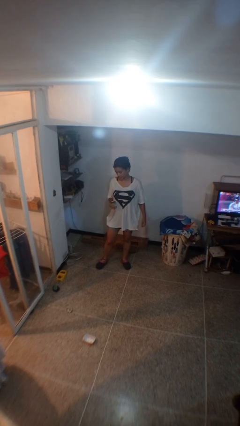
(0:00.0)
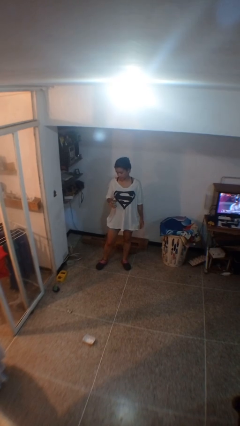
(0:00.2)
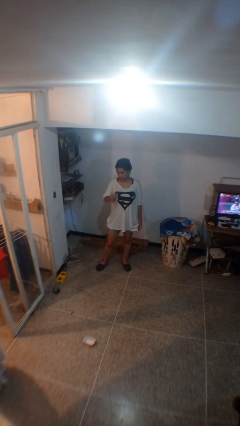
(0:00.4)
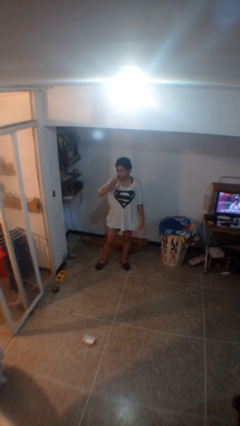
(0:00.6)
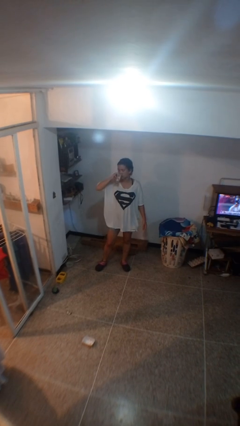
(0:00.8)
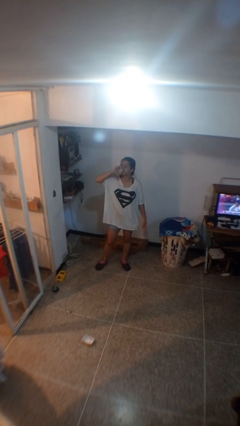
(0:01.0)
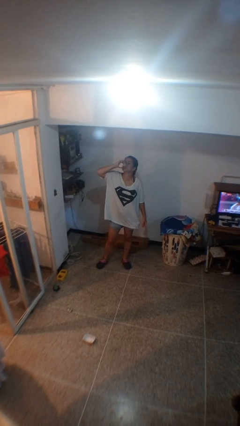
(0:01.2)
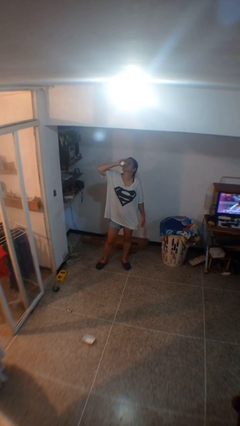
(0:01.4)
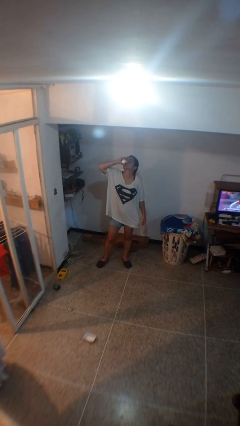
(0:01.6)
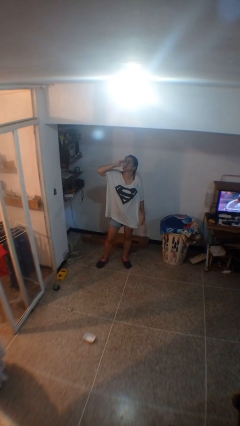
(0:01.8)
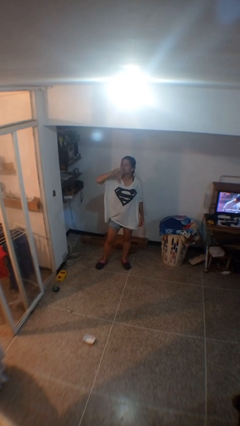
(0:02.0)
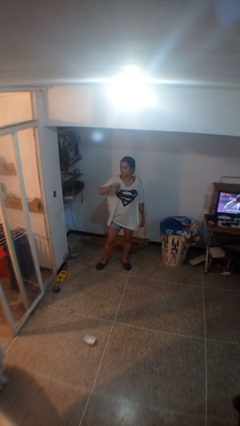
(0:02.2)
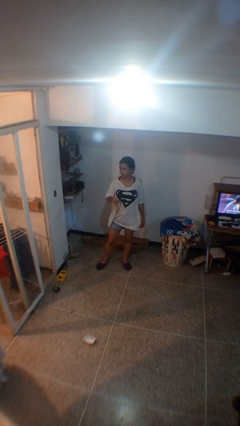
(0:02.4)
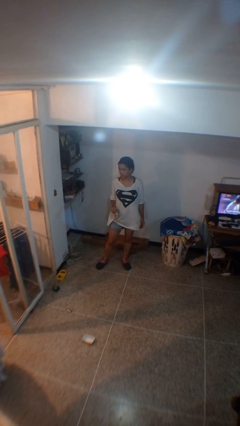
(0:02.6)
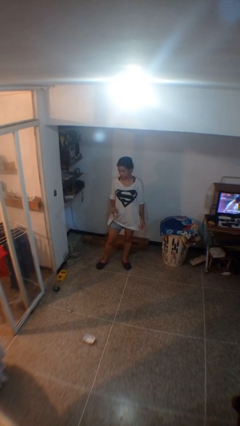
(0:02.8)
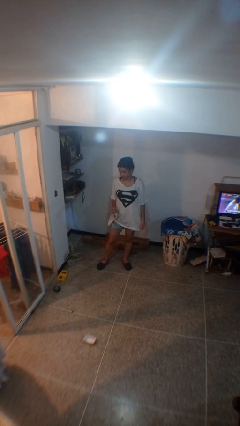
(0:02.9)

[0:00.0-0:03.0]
person drinks from beverage can

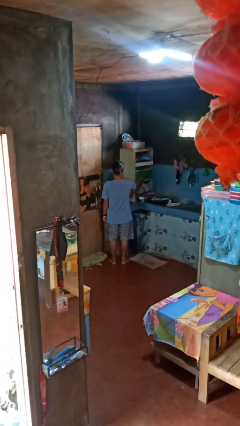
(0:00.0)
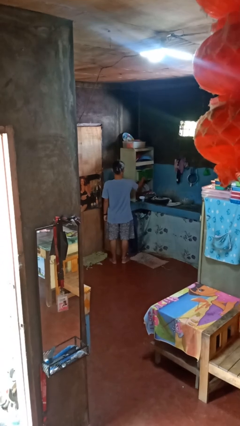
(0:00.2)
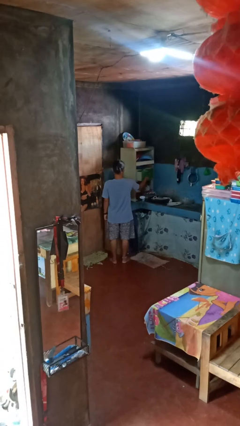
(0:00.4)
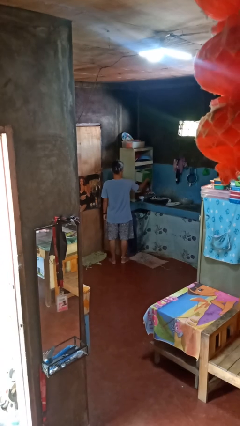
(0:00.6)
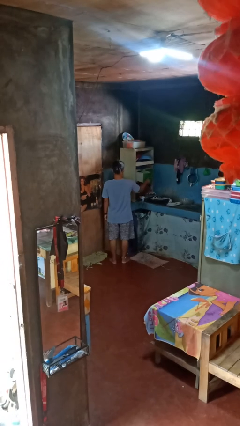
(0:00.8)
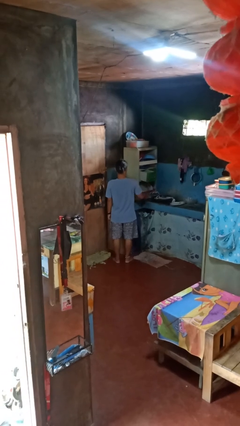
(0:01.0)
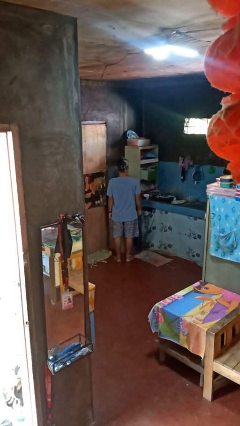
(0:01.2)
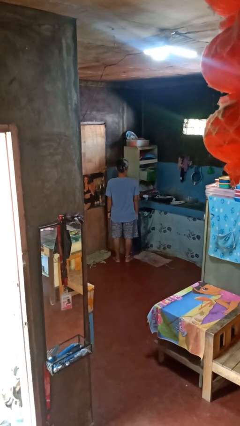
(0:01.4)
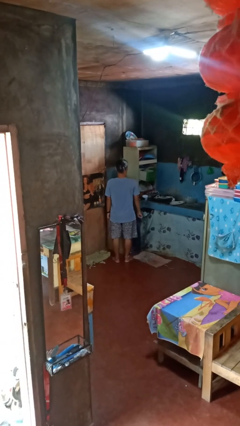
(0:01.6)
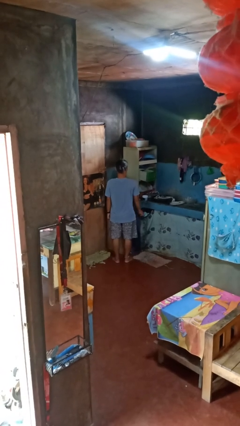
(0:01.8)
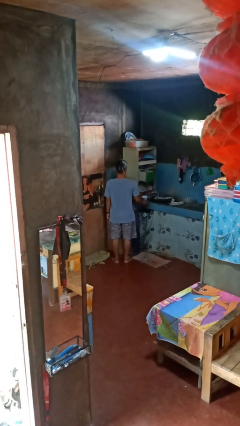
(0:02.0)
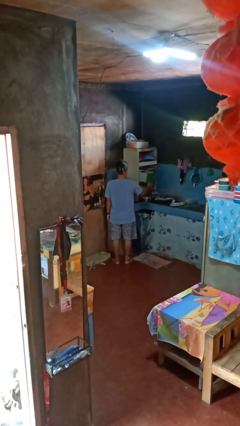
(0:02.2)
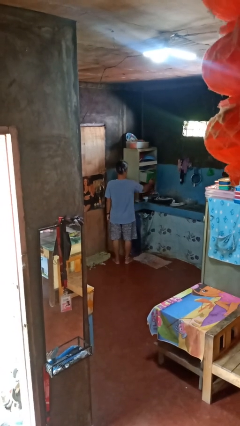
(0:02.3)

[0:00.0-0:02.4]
person opens kitchen drawer

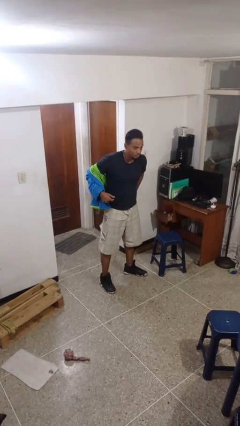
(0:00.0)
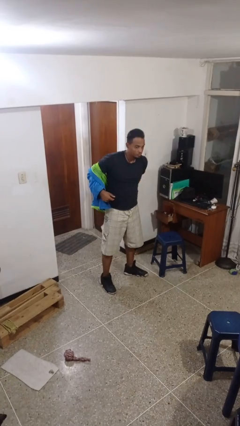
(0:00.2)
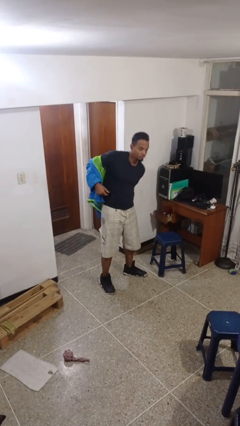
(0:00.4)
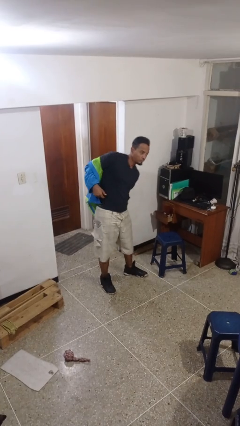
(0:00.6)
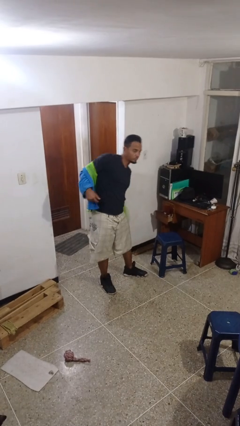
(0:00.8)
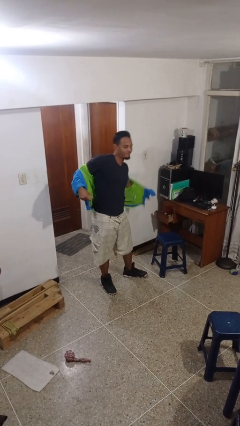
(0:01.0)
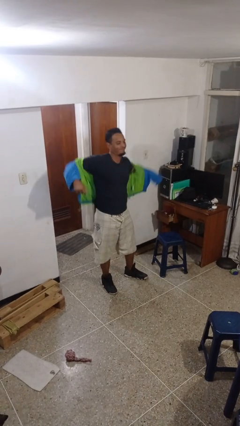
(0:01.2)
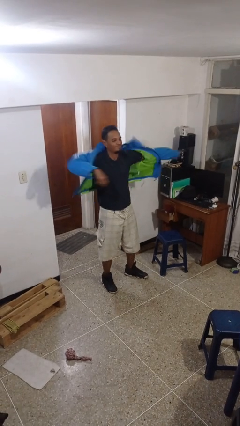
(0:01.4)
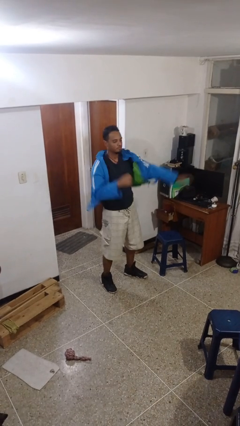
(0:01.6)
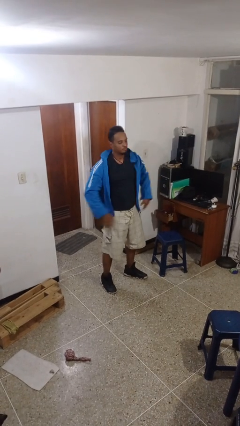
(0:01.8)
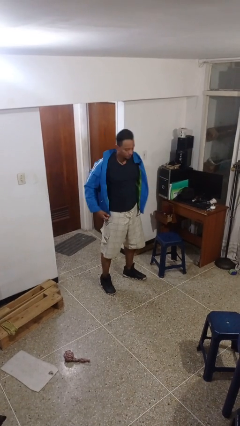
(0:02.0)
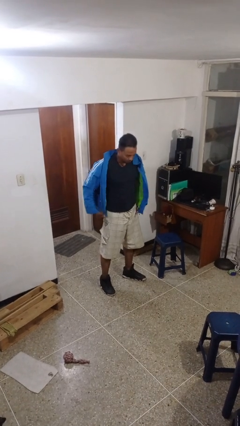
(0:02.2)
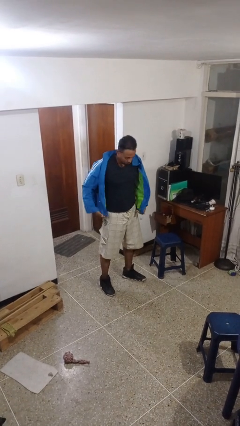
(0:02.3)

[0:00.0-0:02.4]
person puts on jacket

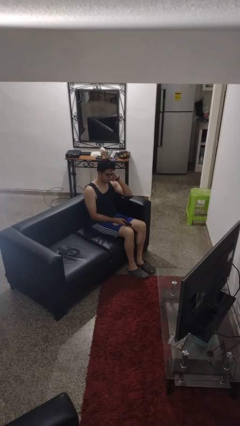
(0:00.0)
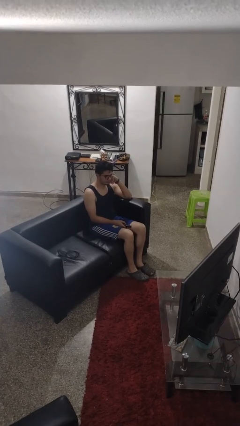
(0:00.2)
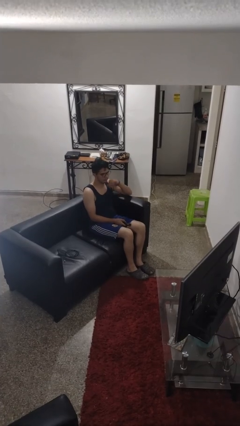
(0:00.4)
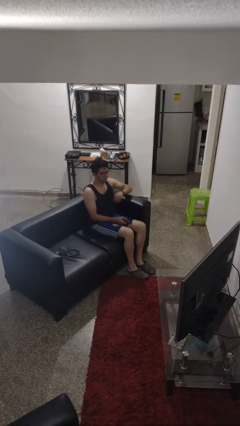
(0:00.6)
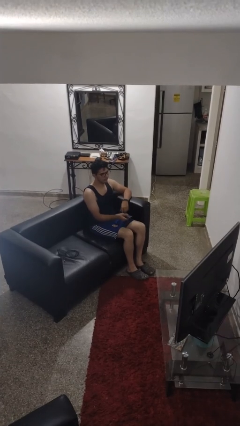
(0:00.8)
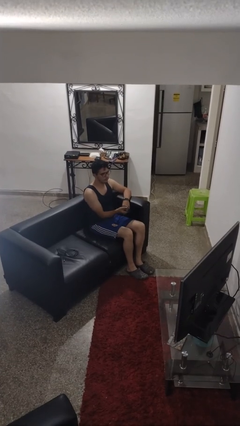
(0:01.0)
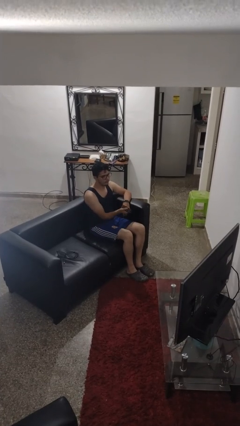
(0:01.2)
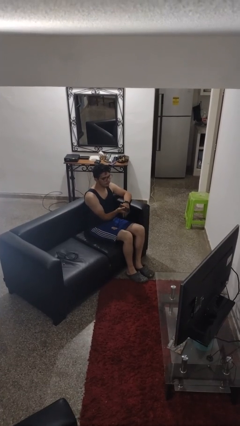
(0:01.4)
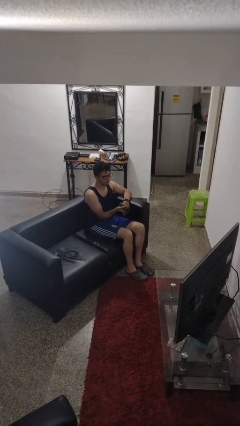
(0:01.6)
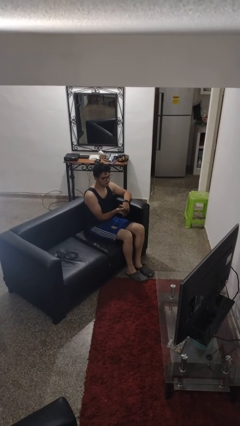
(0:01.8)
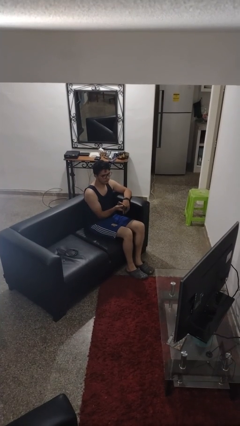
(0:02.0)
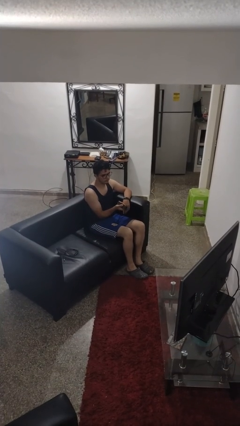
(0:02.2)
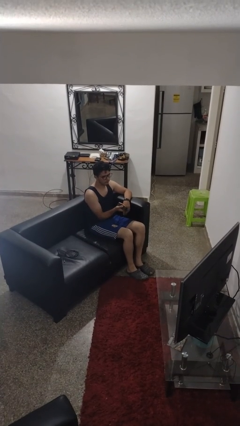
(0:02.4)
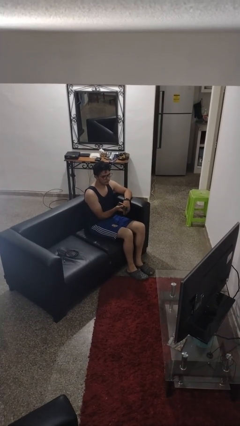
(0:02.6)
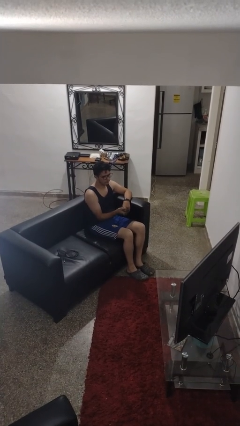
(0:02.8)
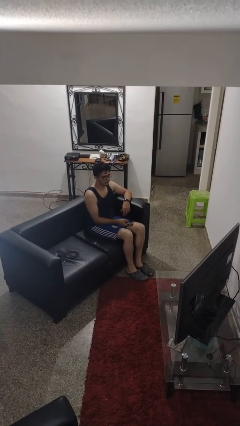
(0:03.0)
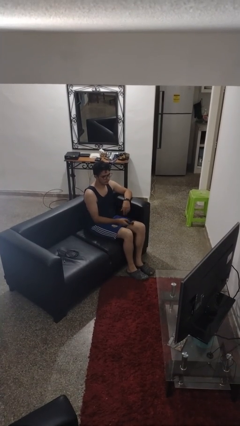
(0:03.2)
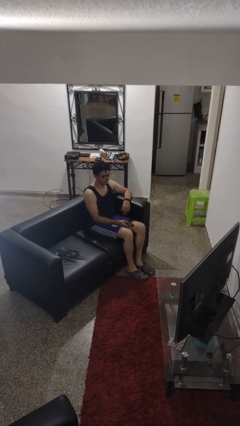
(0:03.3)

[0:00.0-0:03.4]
person uses television remote

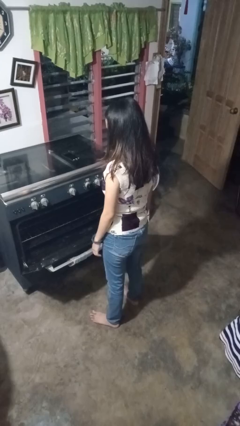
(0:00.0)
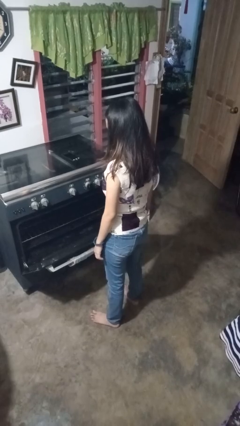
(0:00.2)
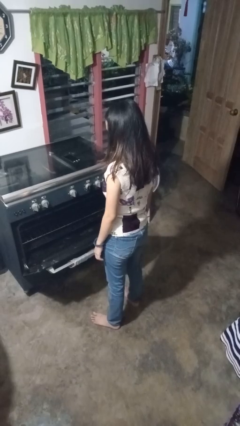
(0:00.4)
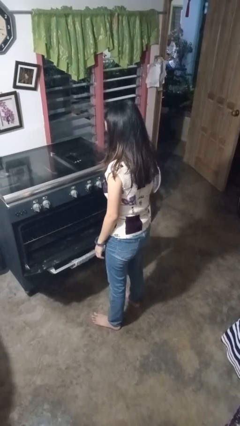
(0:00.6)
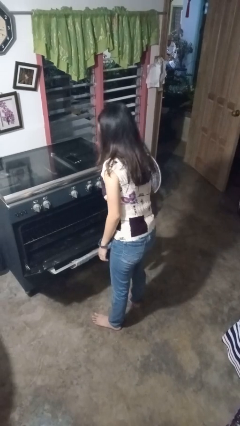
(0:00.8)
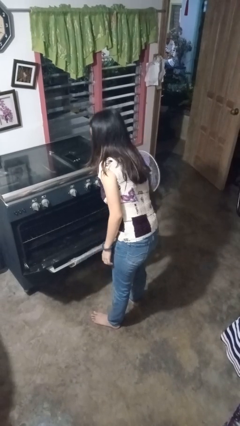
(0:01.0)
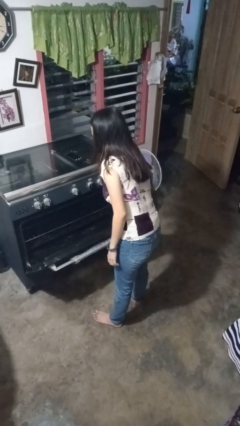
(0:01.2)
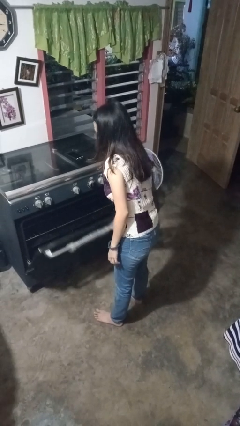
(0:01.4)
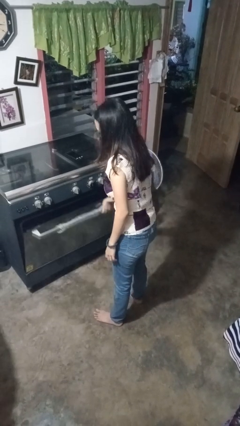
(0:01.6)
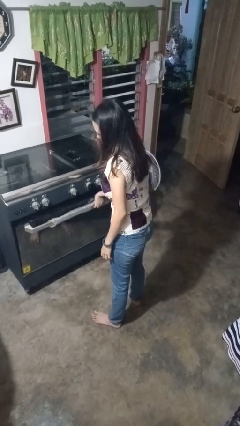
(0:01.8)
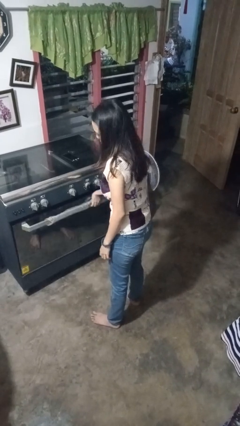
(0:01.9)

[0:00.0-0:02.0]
person closes oven door

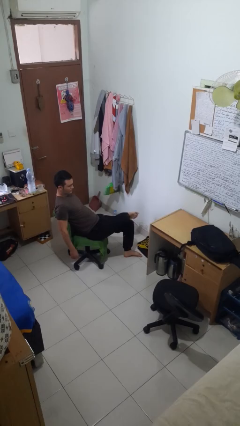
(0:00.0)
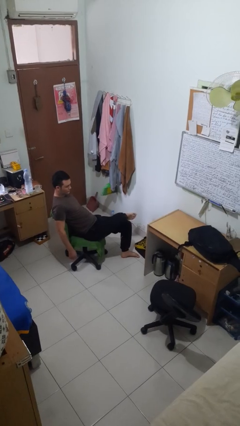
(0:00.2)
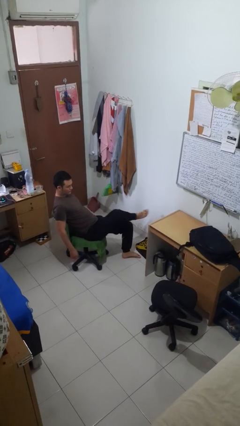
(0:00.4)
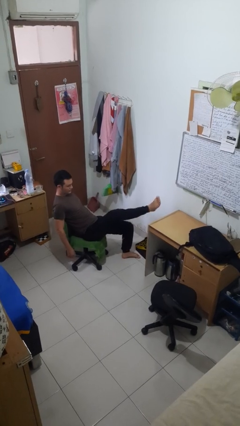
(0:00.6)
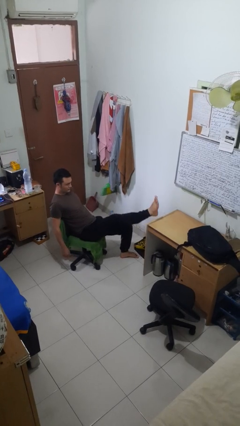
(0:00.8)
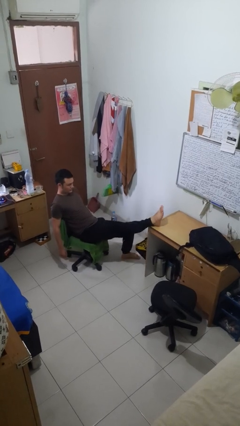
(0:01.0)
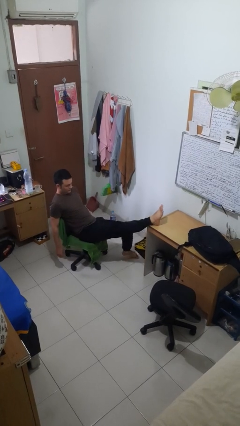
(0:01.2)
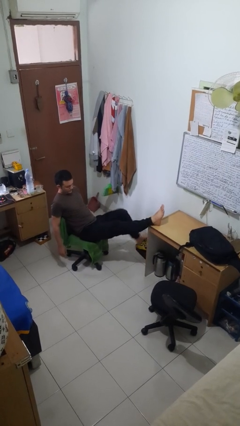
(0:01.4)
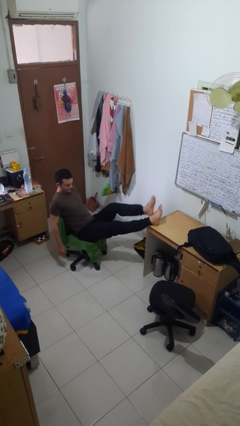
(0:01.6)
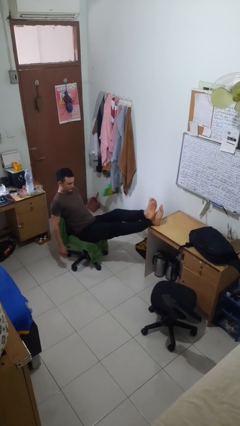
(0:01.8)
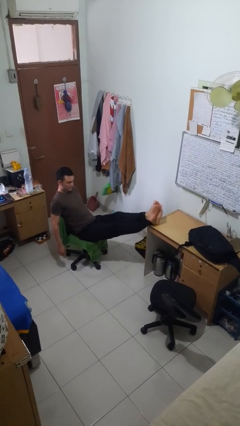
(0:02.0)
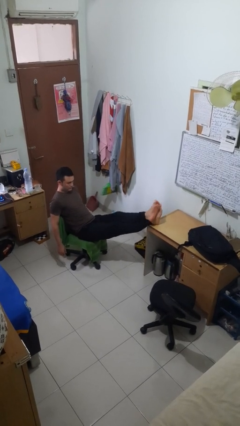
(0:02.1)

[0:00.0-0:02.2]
person puts feet up

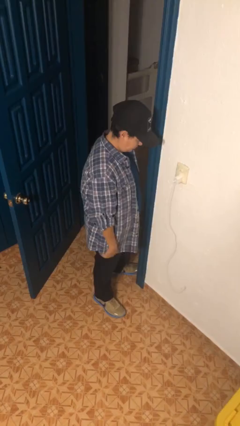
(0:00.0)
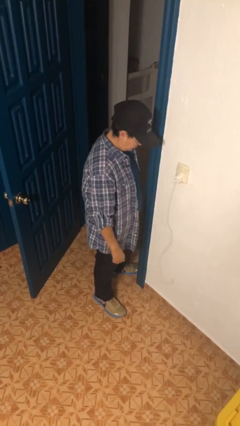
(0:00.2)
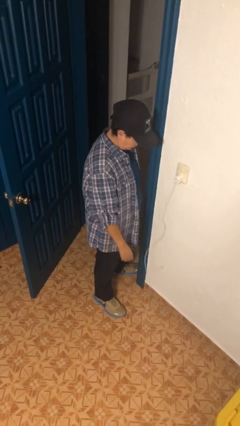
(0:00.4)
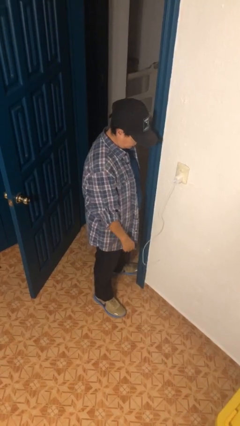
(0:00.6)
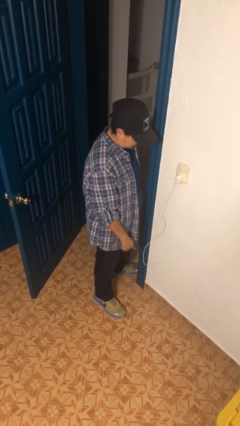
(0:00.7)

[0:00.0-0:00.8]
person unplugs from electrical socket

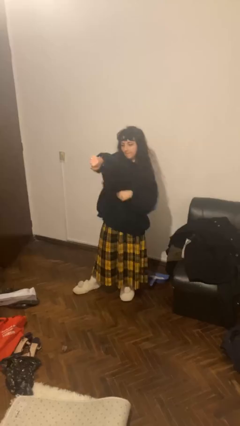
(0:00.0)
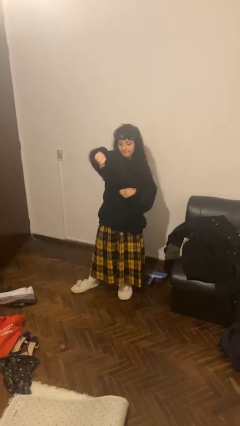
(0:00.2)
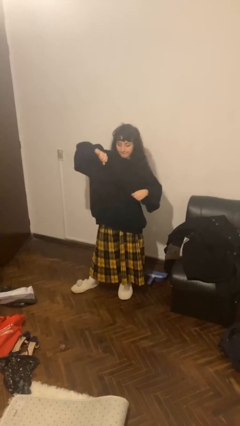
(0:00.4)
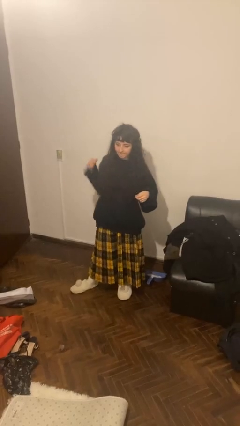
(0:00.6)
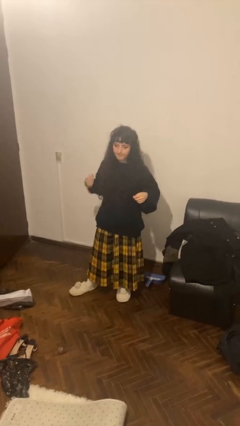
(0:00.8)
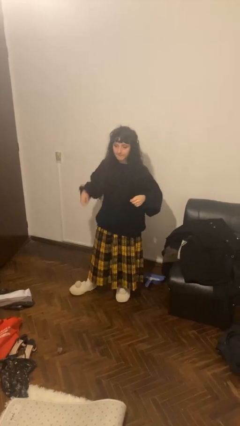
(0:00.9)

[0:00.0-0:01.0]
person punches
